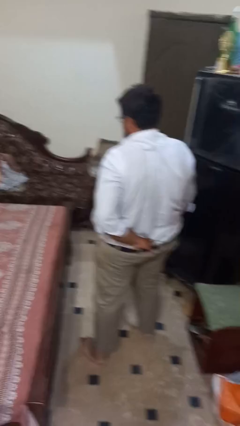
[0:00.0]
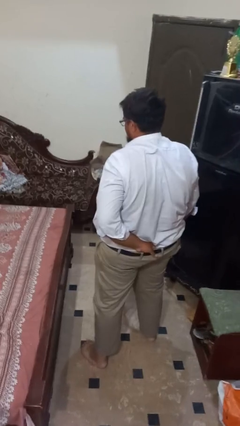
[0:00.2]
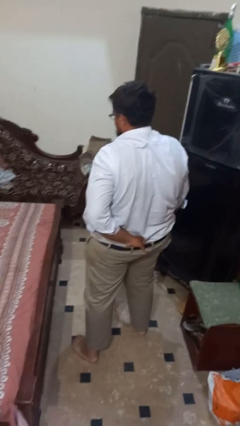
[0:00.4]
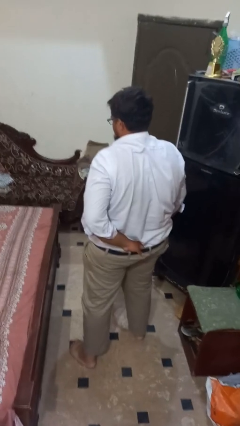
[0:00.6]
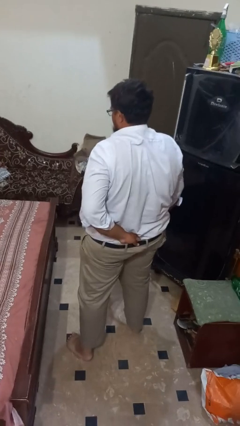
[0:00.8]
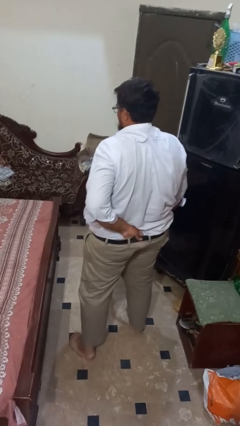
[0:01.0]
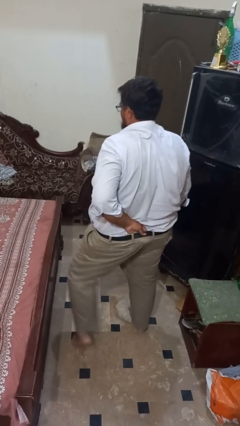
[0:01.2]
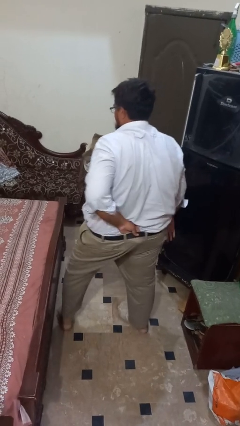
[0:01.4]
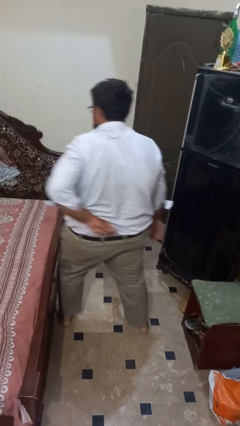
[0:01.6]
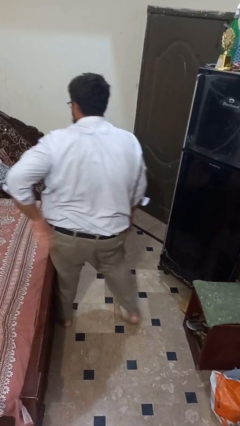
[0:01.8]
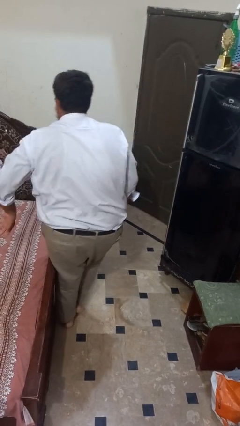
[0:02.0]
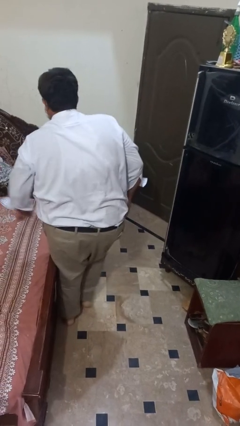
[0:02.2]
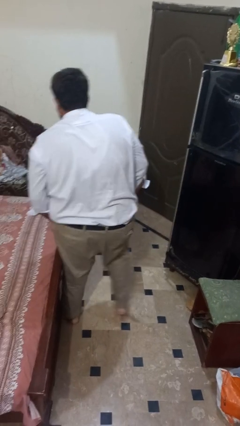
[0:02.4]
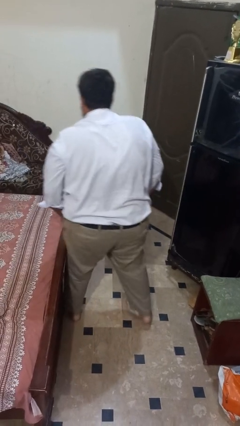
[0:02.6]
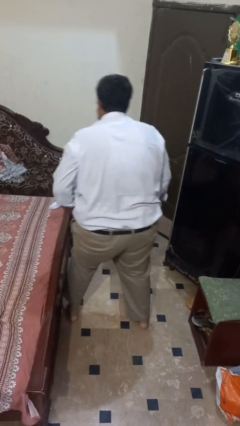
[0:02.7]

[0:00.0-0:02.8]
person trips on object on floor

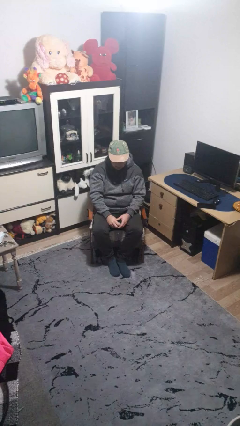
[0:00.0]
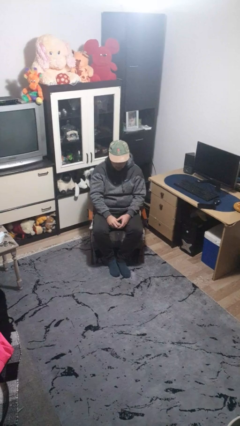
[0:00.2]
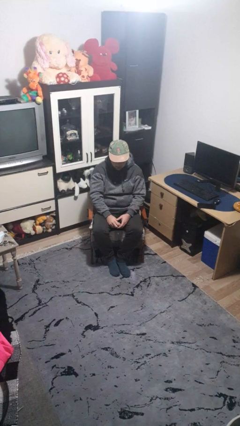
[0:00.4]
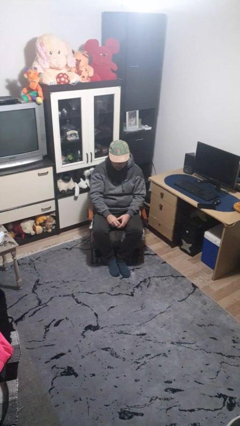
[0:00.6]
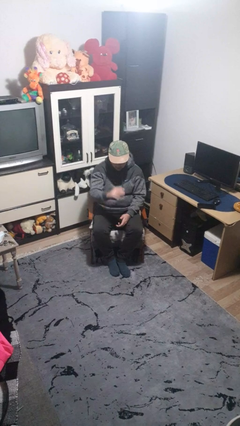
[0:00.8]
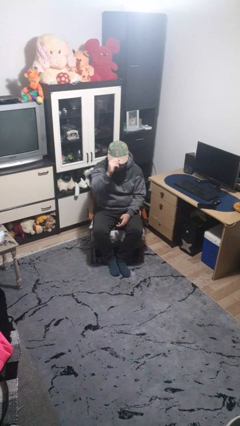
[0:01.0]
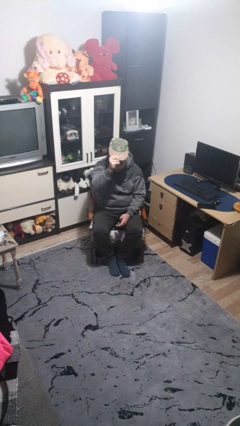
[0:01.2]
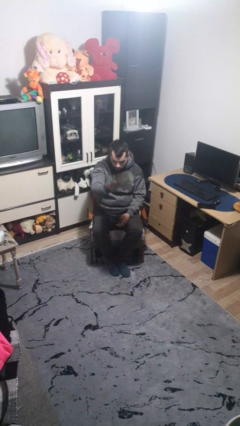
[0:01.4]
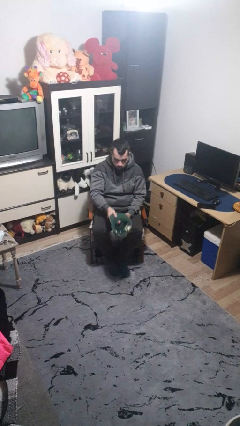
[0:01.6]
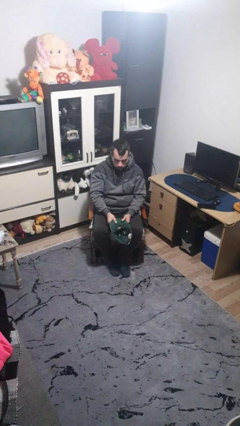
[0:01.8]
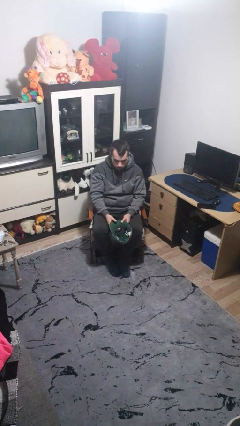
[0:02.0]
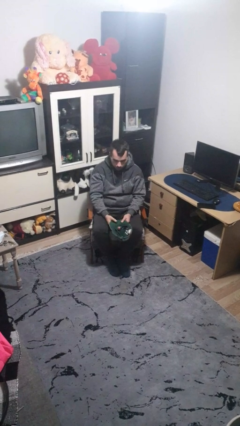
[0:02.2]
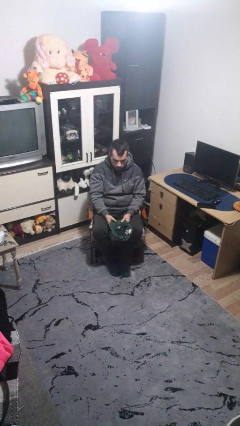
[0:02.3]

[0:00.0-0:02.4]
person takes off hat

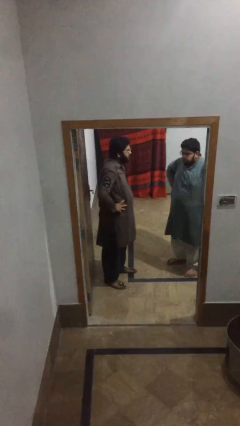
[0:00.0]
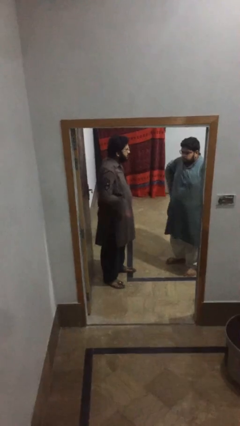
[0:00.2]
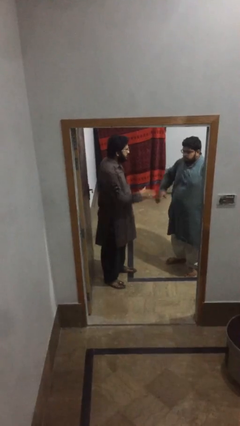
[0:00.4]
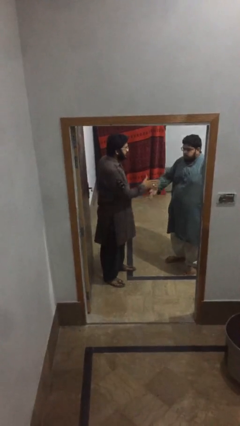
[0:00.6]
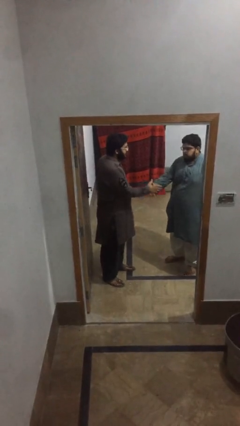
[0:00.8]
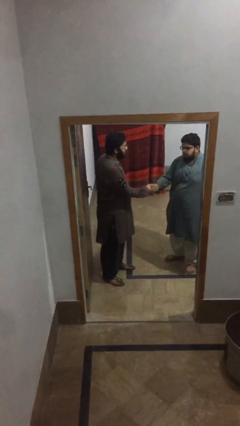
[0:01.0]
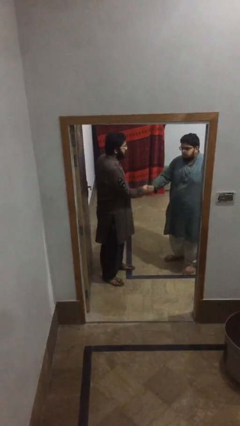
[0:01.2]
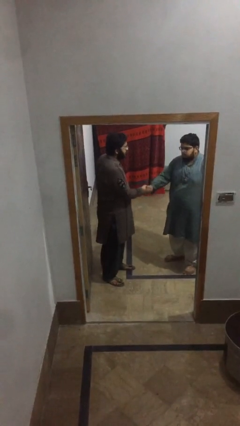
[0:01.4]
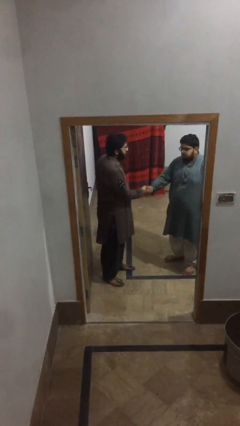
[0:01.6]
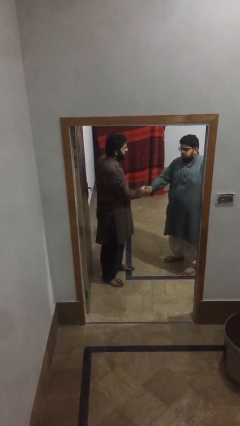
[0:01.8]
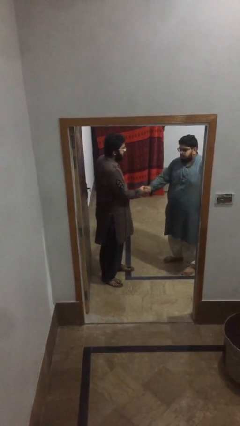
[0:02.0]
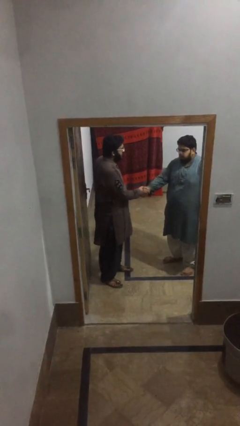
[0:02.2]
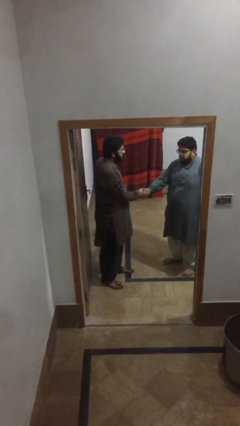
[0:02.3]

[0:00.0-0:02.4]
person shakes hand

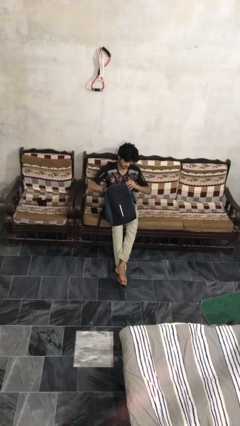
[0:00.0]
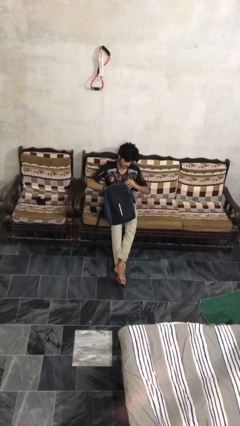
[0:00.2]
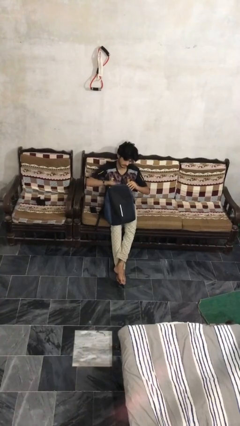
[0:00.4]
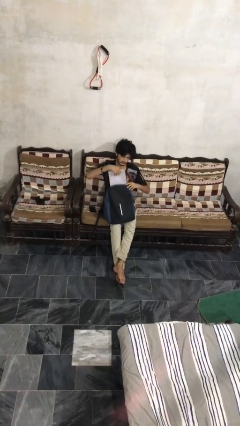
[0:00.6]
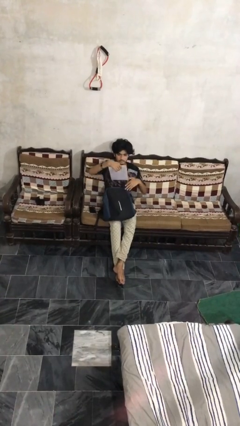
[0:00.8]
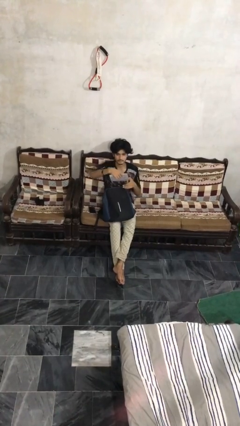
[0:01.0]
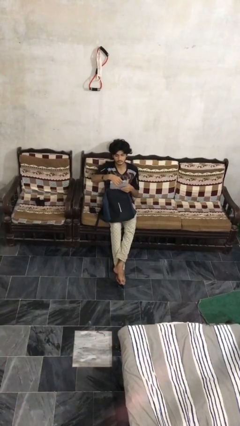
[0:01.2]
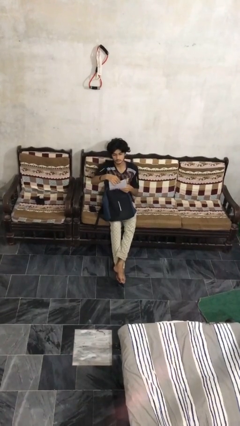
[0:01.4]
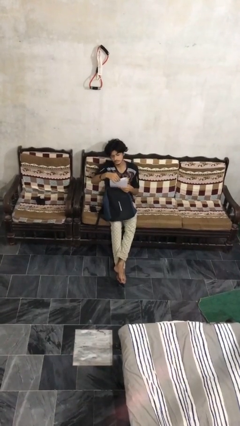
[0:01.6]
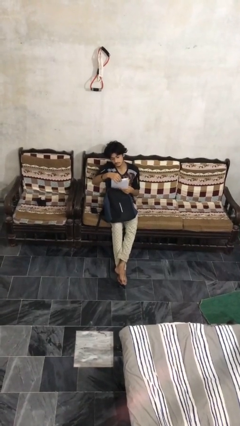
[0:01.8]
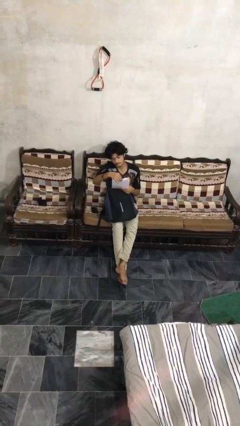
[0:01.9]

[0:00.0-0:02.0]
person takes object from backpack

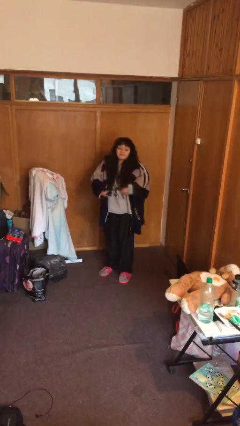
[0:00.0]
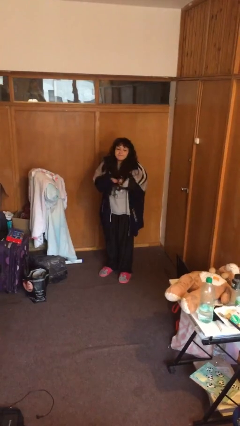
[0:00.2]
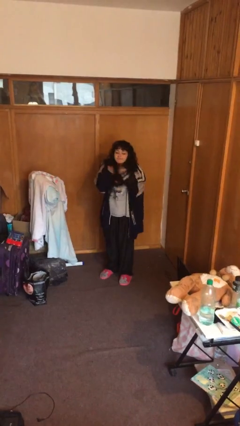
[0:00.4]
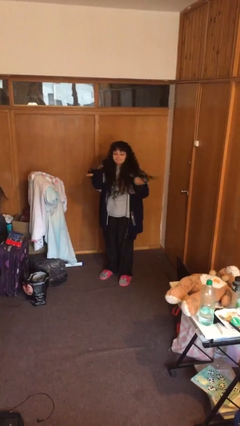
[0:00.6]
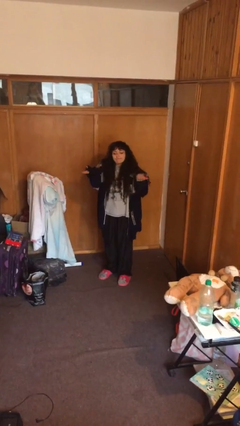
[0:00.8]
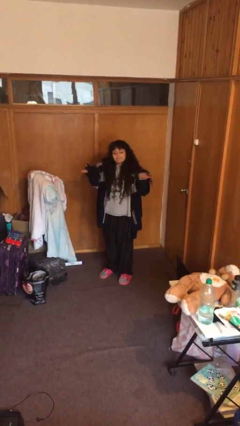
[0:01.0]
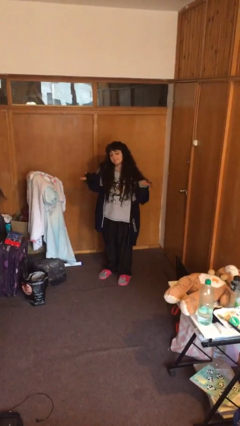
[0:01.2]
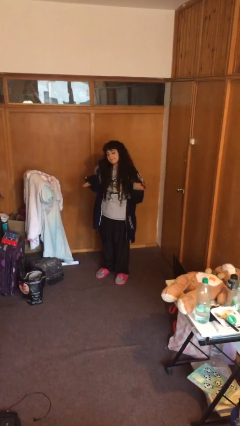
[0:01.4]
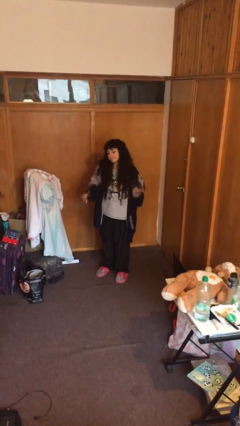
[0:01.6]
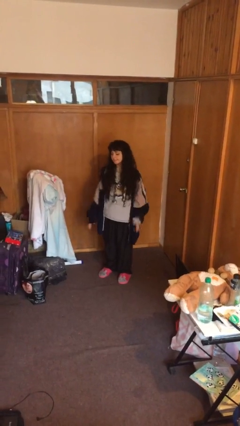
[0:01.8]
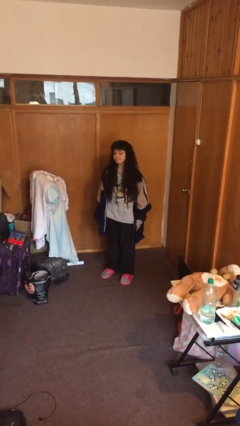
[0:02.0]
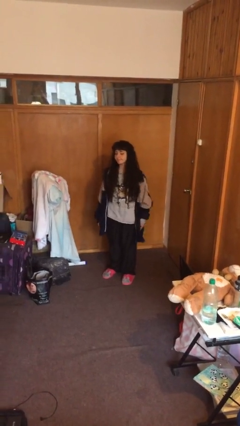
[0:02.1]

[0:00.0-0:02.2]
person shrugs

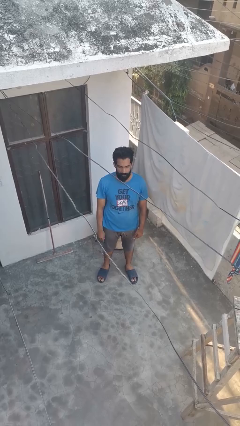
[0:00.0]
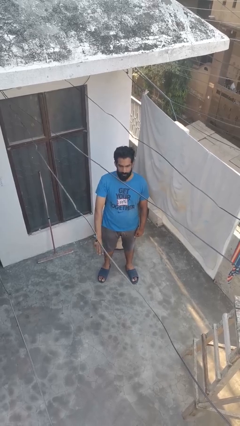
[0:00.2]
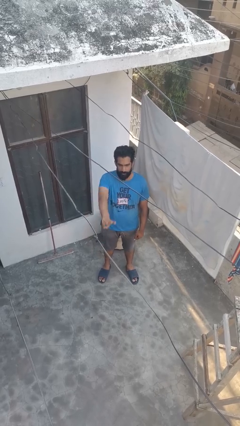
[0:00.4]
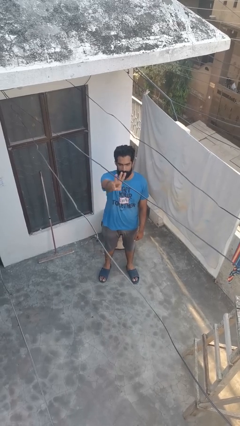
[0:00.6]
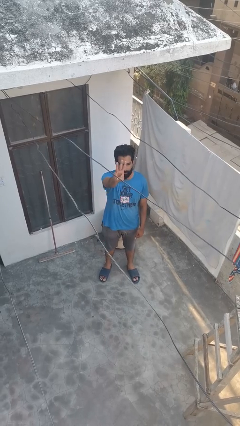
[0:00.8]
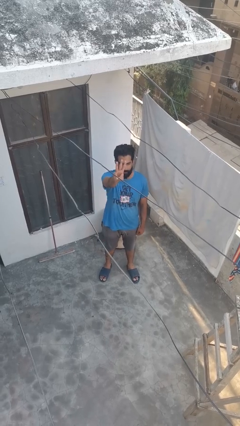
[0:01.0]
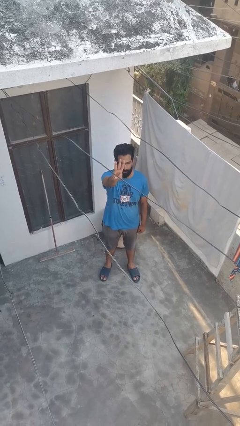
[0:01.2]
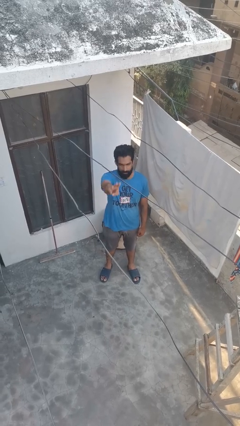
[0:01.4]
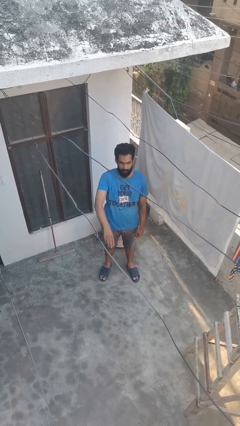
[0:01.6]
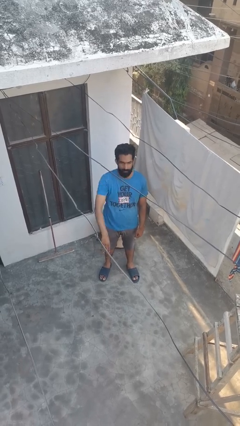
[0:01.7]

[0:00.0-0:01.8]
person gestures number three

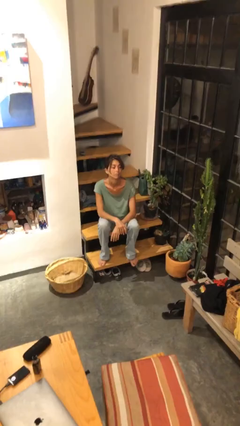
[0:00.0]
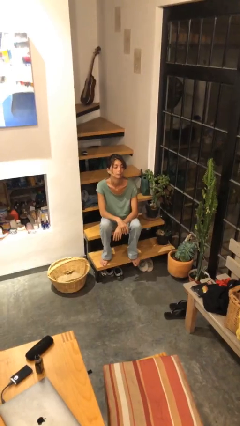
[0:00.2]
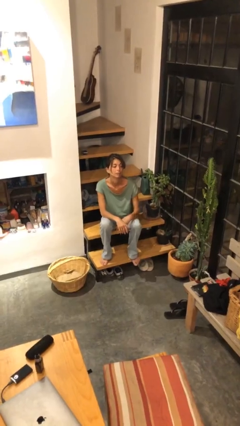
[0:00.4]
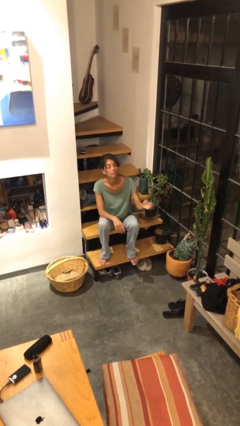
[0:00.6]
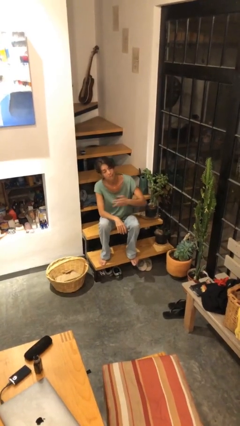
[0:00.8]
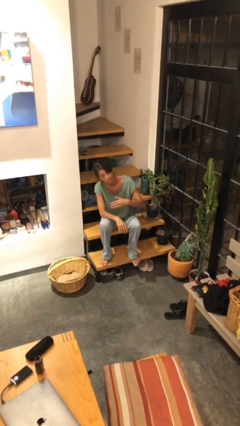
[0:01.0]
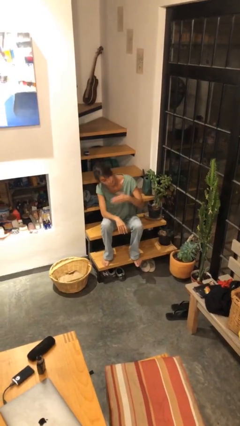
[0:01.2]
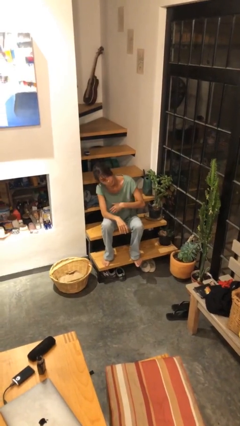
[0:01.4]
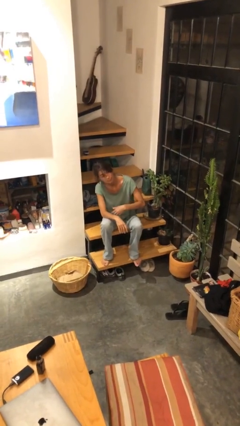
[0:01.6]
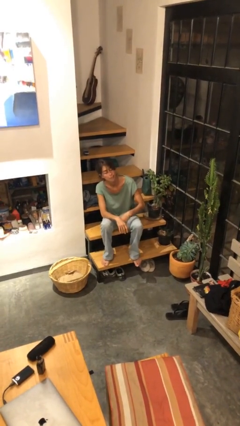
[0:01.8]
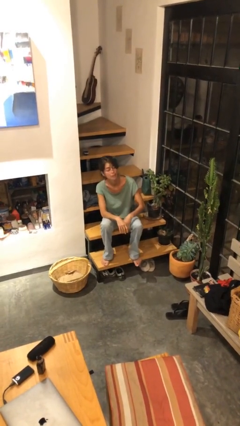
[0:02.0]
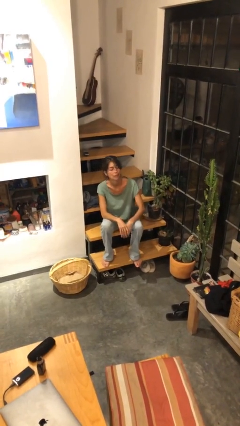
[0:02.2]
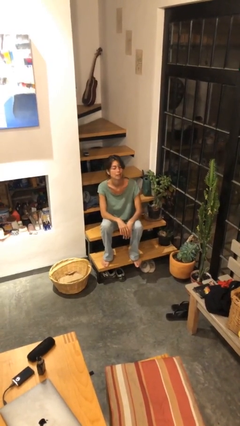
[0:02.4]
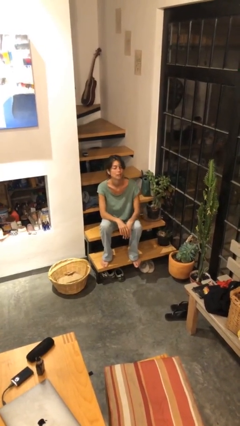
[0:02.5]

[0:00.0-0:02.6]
person gestures come here

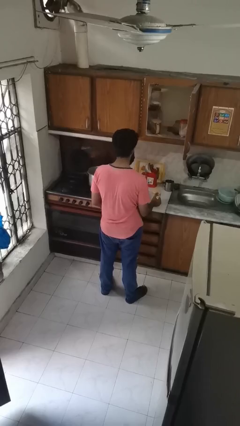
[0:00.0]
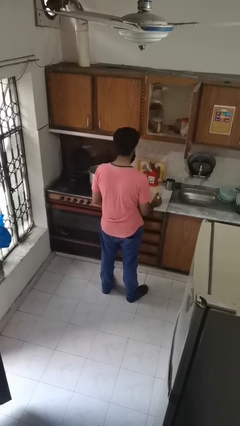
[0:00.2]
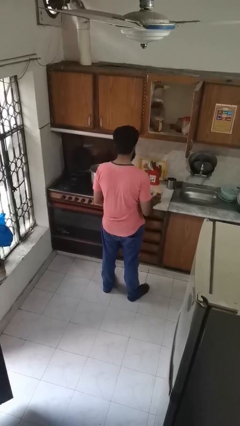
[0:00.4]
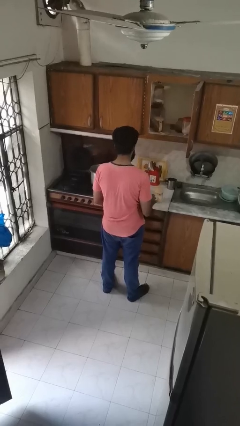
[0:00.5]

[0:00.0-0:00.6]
person puts down object into cabinet
